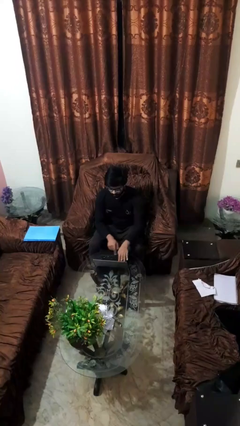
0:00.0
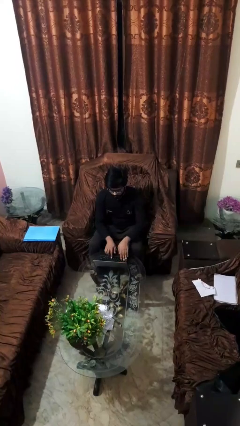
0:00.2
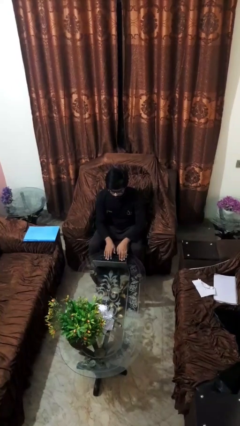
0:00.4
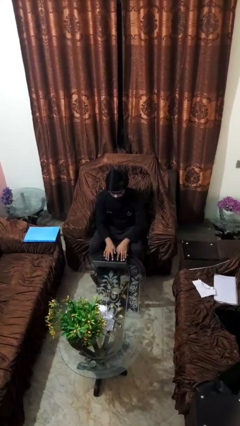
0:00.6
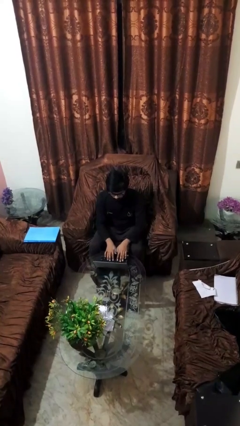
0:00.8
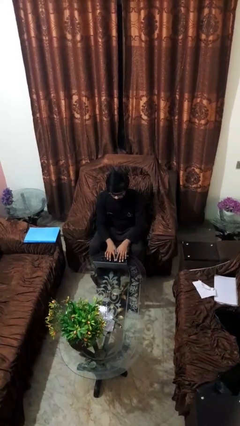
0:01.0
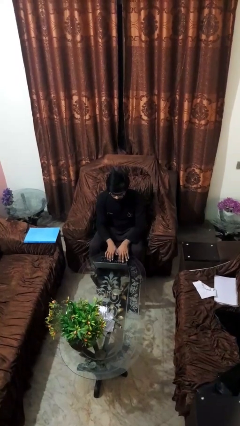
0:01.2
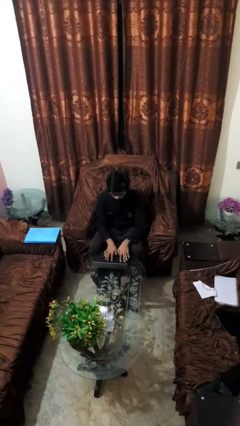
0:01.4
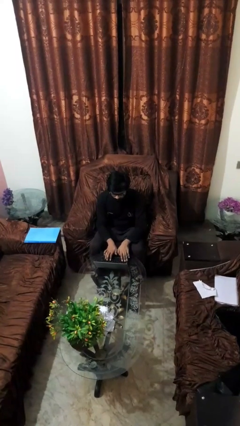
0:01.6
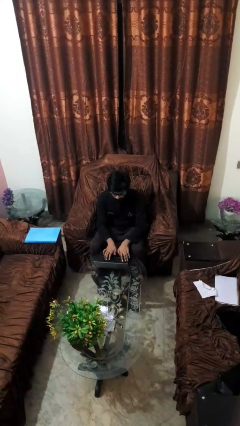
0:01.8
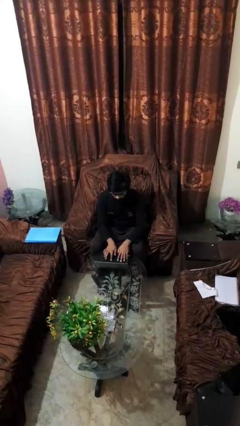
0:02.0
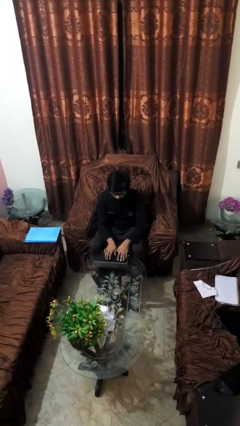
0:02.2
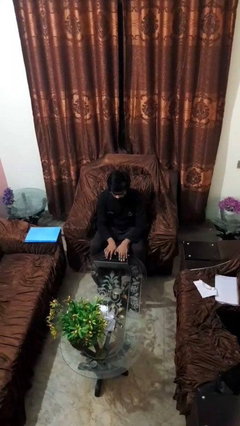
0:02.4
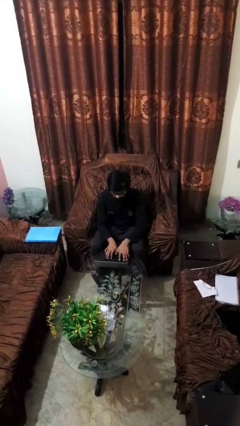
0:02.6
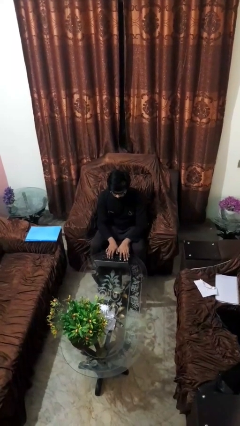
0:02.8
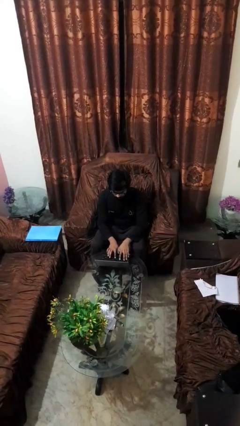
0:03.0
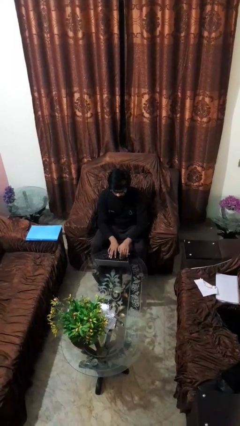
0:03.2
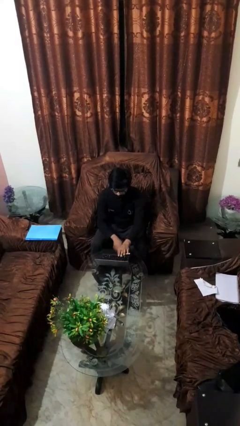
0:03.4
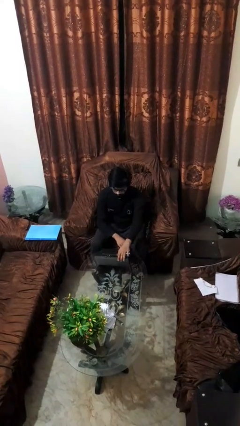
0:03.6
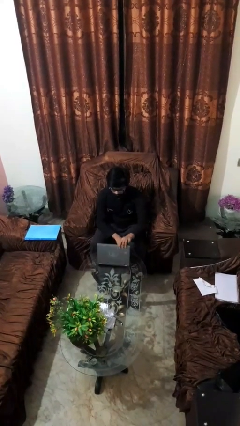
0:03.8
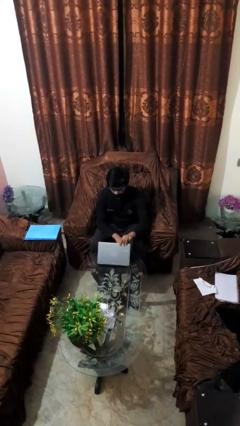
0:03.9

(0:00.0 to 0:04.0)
person interacts with laptop

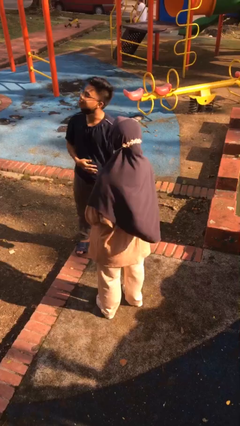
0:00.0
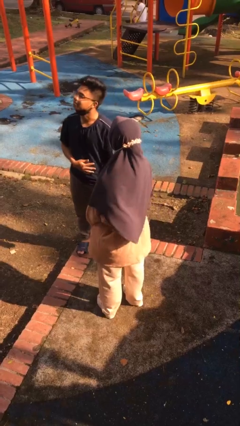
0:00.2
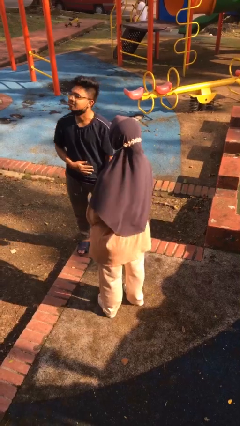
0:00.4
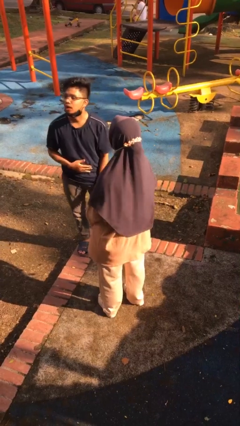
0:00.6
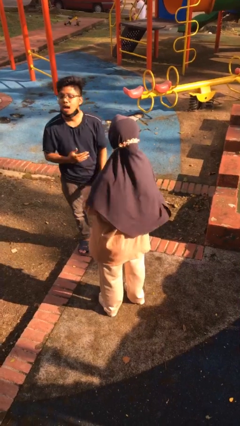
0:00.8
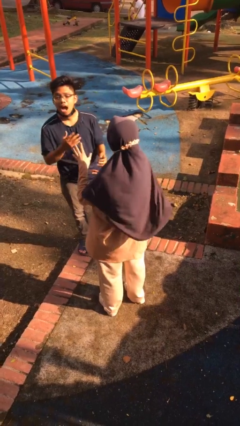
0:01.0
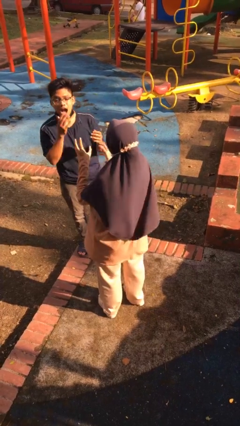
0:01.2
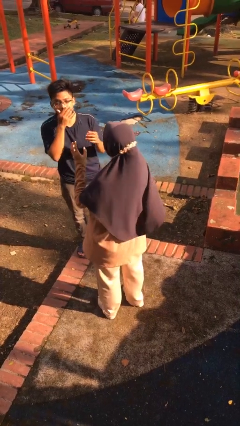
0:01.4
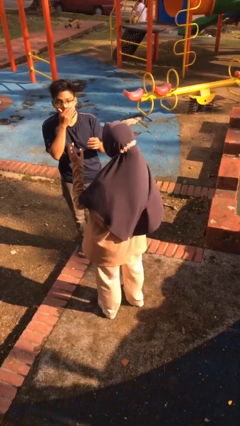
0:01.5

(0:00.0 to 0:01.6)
person laughs with person

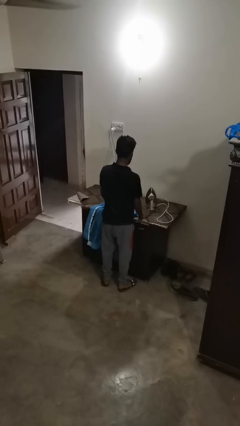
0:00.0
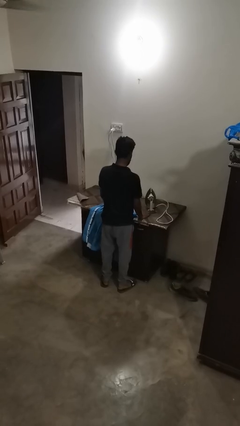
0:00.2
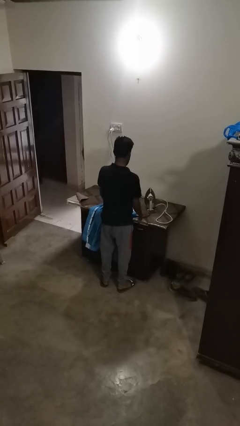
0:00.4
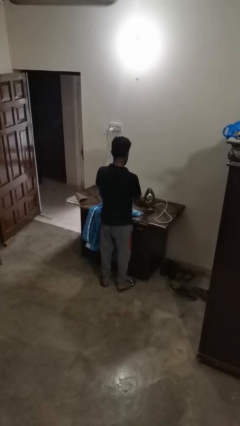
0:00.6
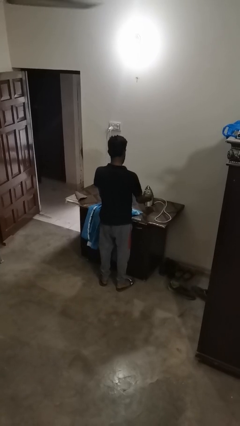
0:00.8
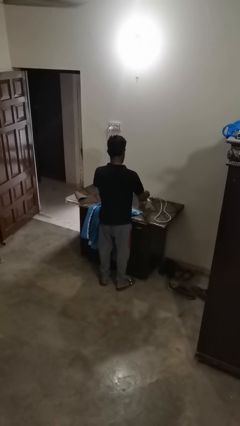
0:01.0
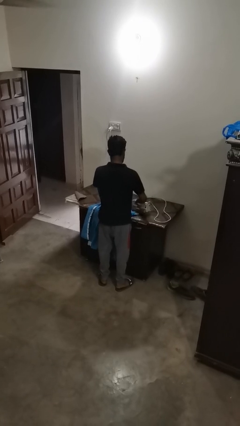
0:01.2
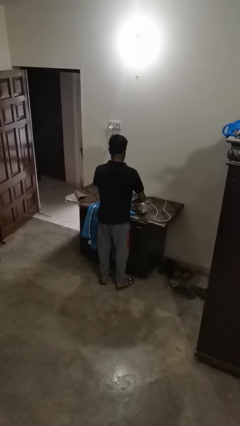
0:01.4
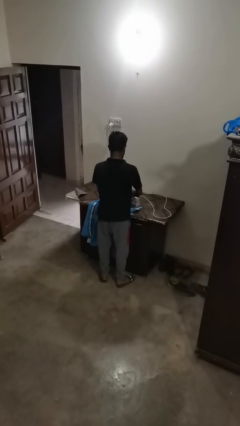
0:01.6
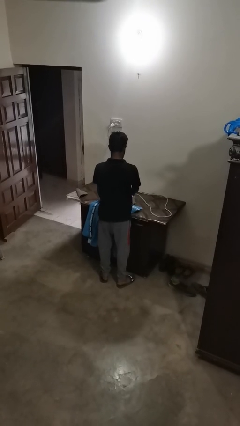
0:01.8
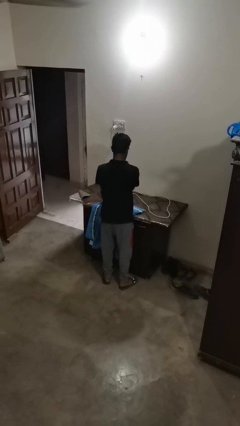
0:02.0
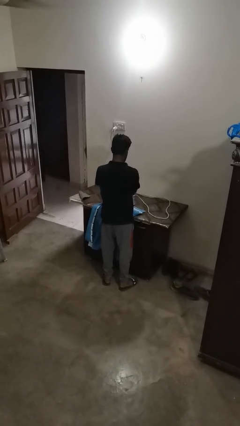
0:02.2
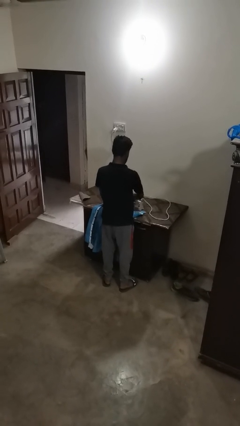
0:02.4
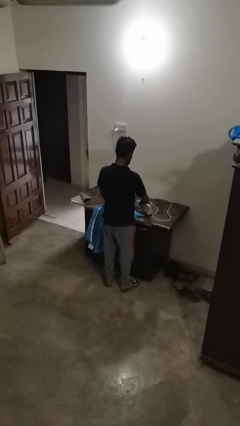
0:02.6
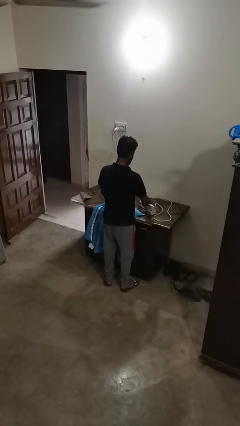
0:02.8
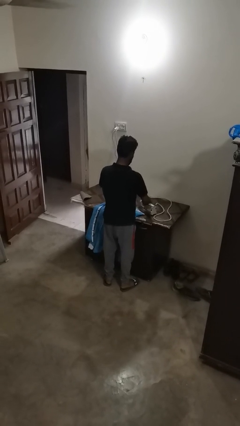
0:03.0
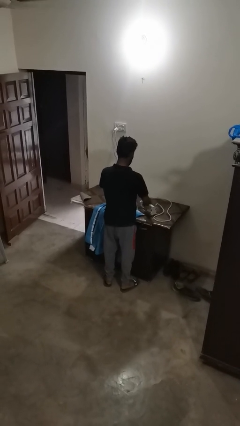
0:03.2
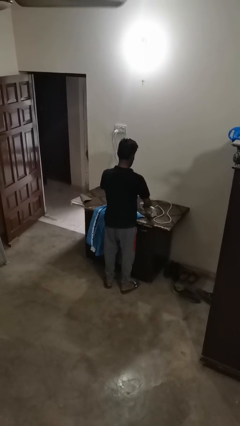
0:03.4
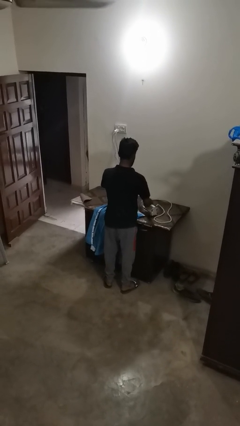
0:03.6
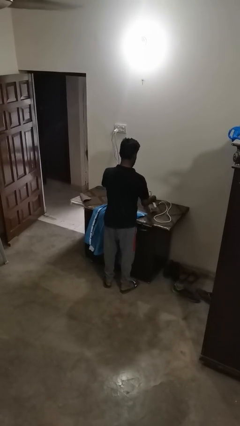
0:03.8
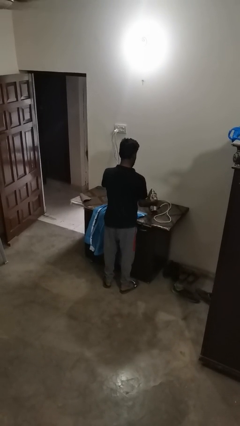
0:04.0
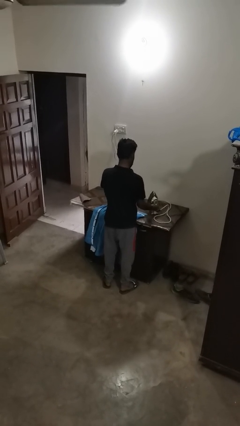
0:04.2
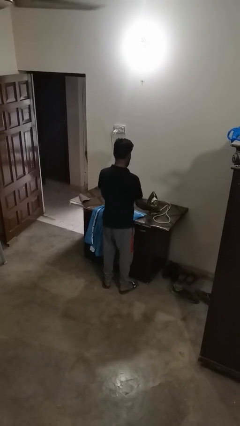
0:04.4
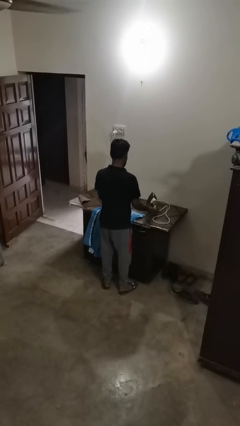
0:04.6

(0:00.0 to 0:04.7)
person irons clothes

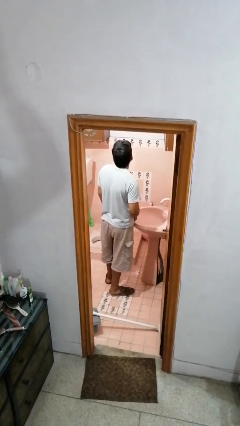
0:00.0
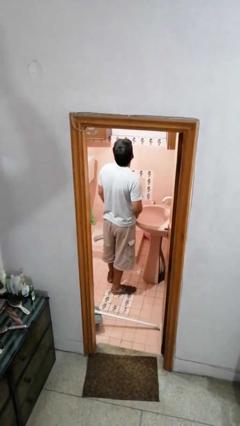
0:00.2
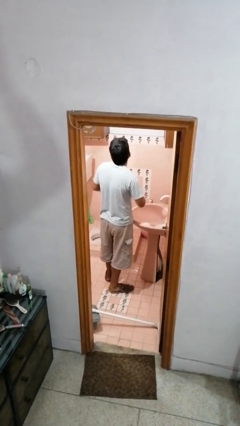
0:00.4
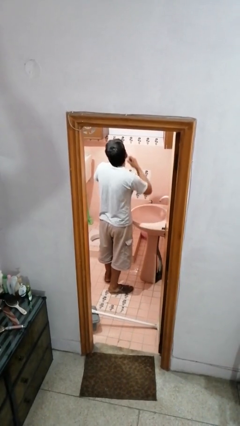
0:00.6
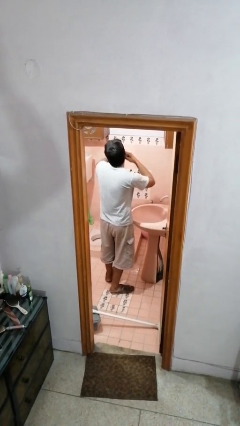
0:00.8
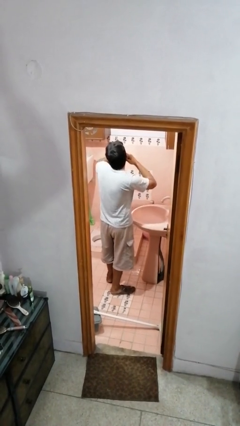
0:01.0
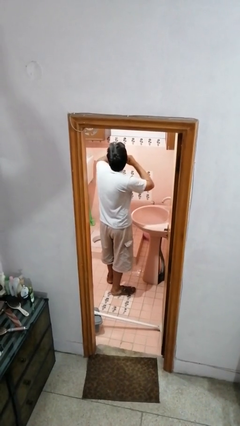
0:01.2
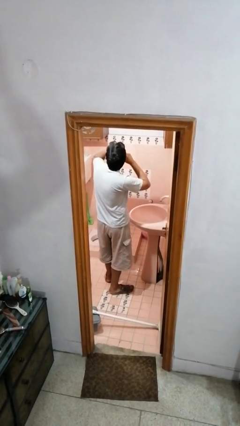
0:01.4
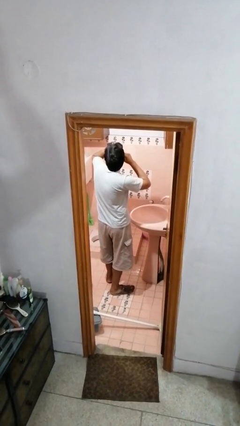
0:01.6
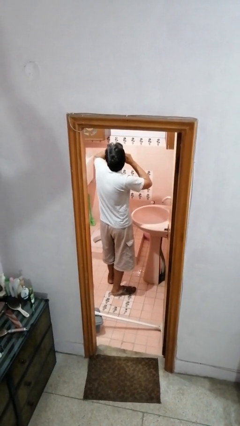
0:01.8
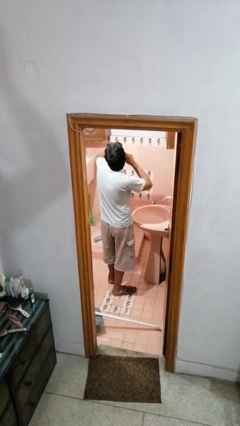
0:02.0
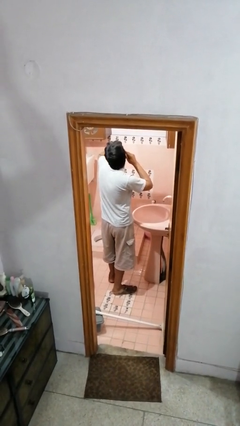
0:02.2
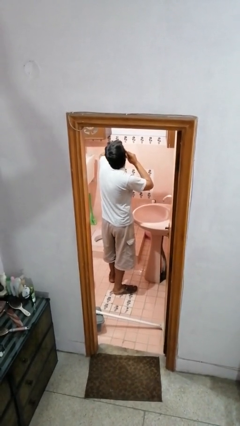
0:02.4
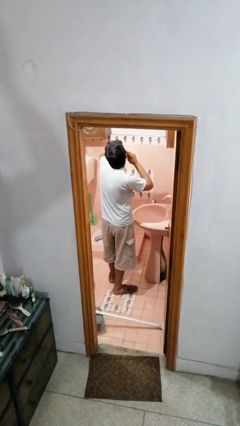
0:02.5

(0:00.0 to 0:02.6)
person flosses

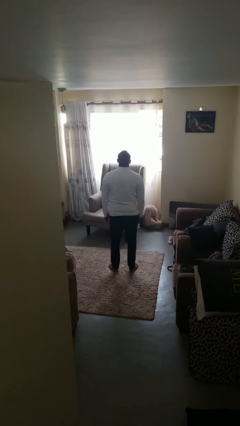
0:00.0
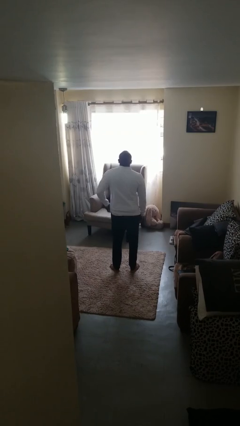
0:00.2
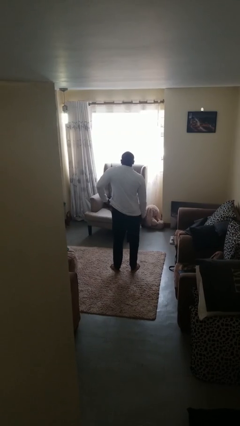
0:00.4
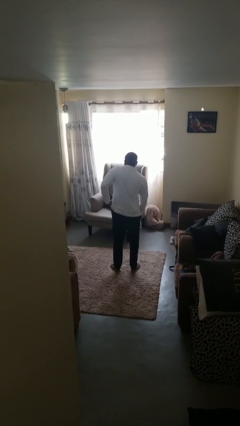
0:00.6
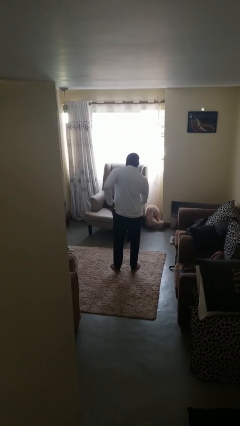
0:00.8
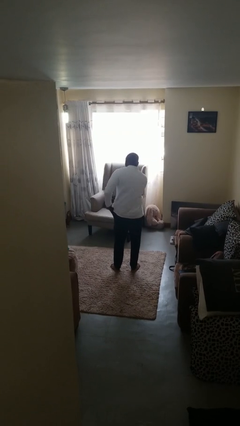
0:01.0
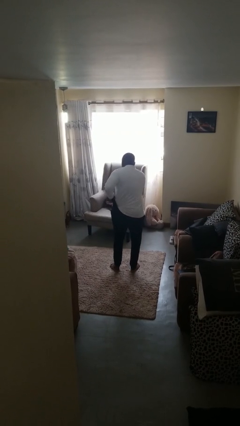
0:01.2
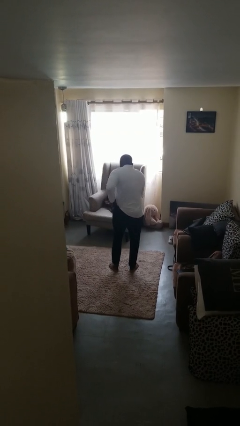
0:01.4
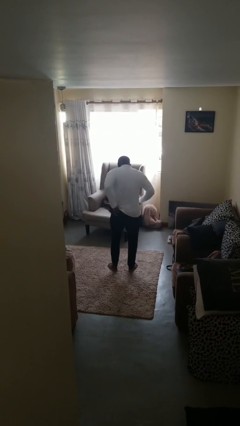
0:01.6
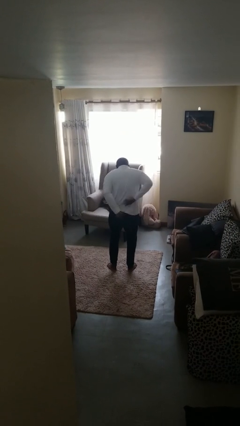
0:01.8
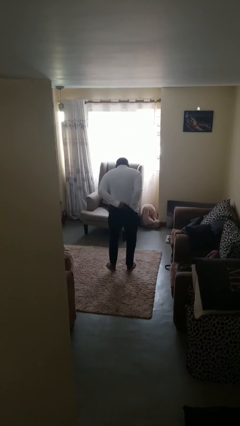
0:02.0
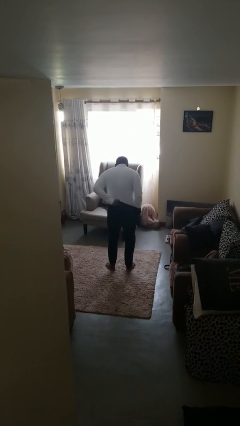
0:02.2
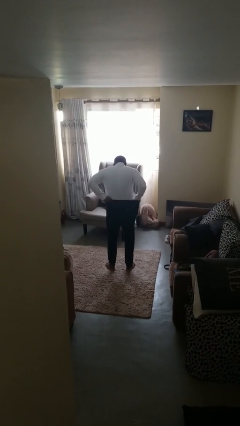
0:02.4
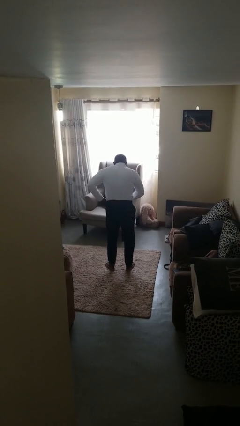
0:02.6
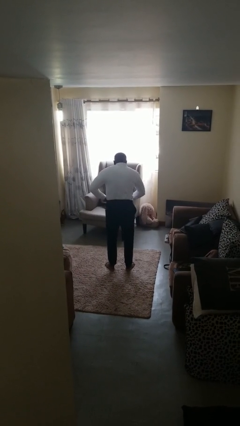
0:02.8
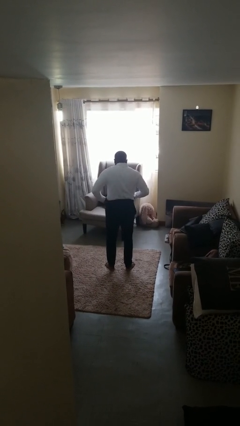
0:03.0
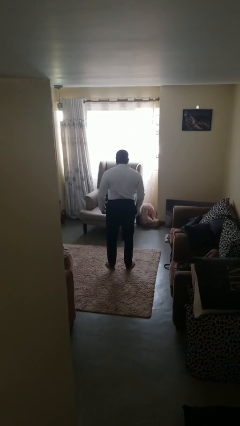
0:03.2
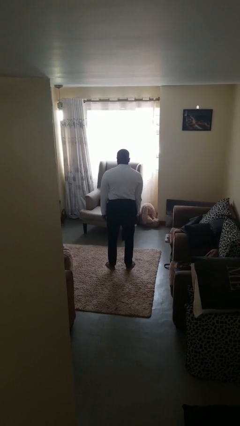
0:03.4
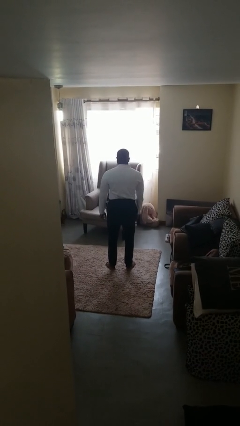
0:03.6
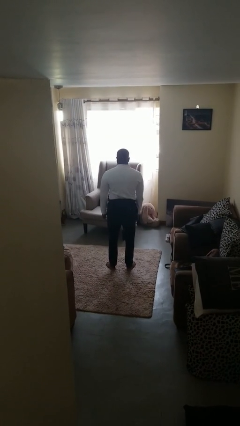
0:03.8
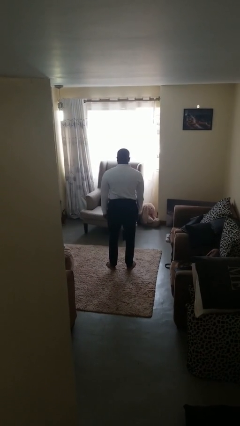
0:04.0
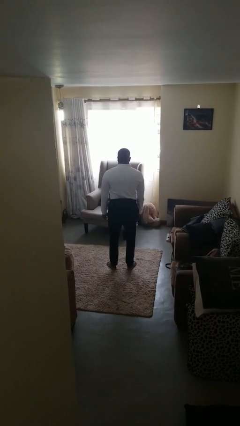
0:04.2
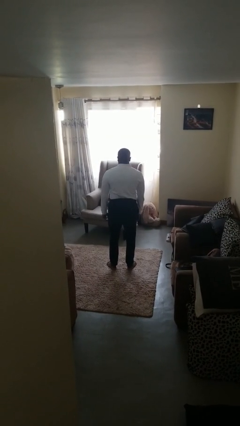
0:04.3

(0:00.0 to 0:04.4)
person tucks in shirt
